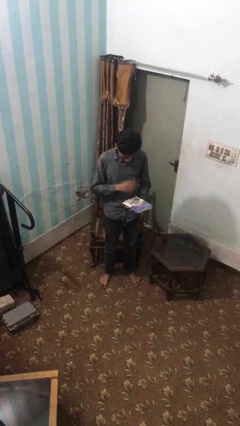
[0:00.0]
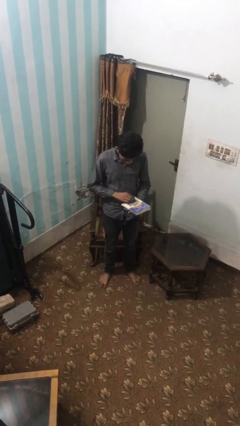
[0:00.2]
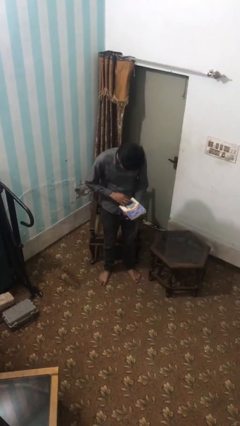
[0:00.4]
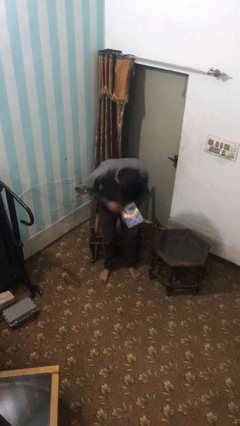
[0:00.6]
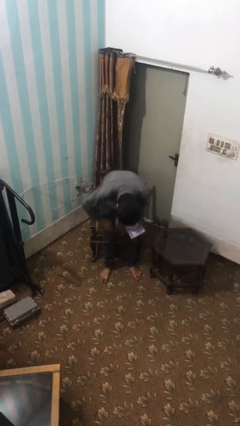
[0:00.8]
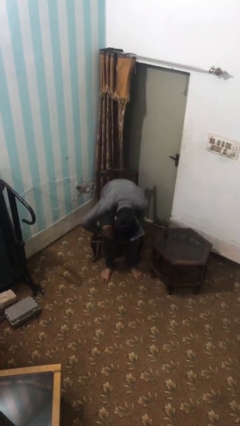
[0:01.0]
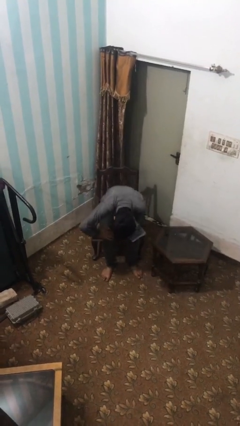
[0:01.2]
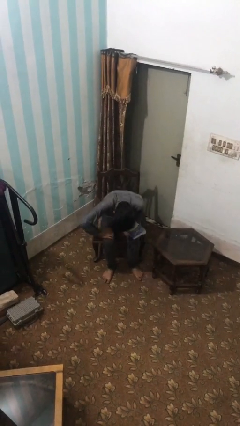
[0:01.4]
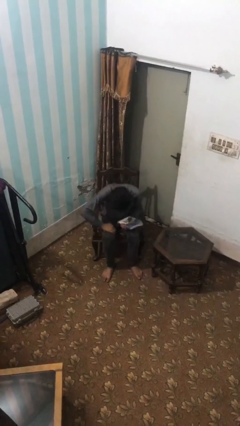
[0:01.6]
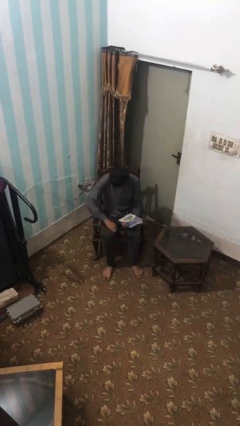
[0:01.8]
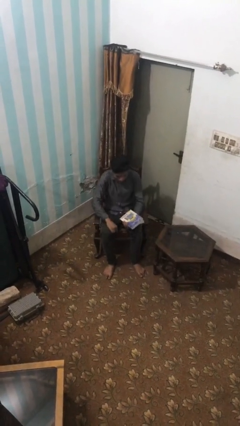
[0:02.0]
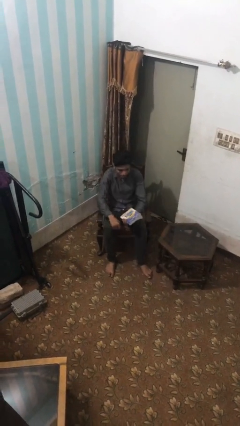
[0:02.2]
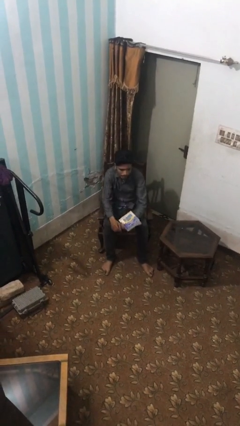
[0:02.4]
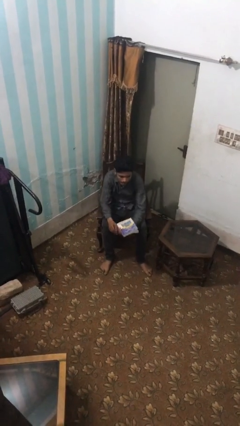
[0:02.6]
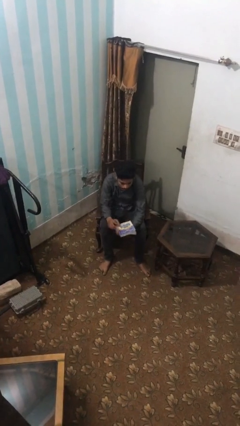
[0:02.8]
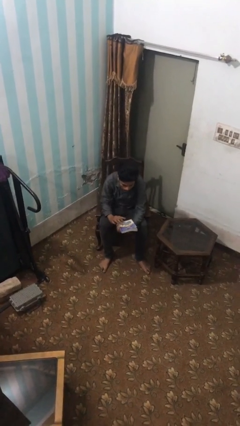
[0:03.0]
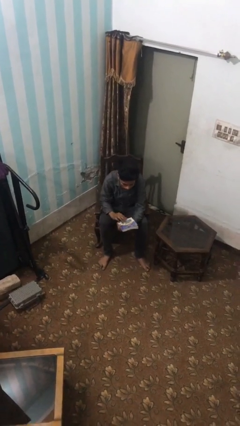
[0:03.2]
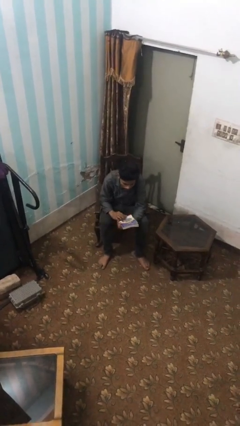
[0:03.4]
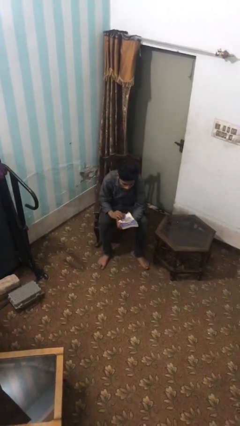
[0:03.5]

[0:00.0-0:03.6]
person sits down

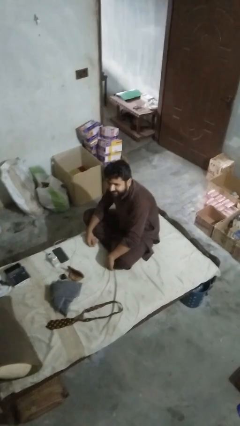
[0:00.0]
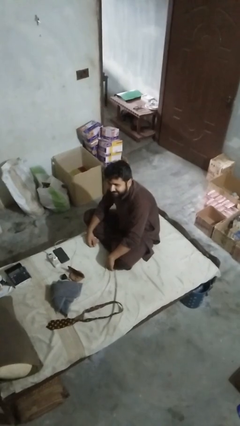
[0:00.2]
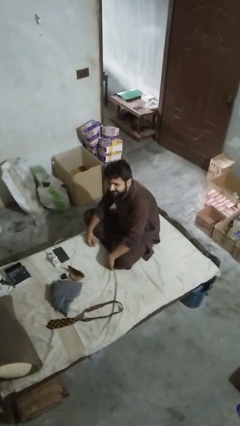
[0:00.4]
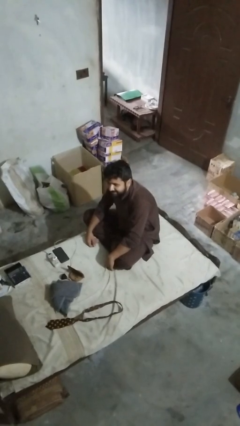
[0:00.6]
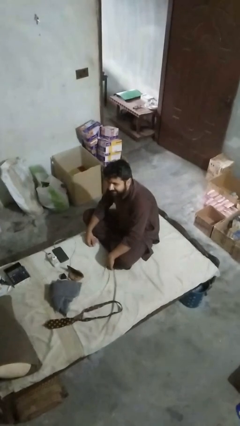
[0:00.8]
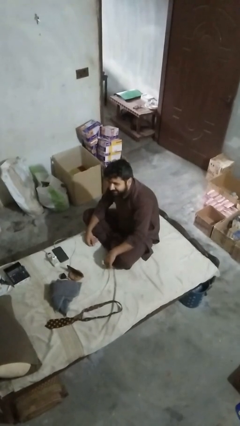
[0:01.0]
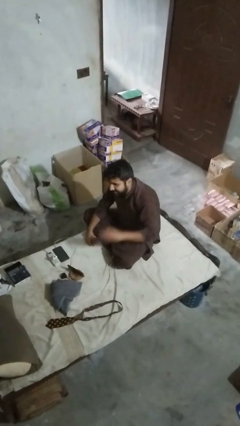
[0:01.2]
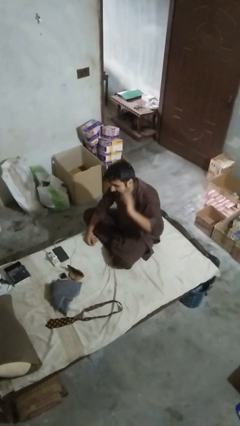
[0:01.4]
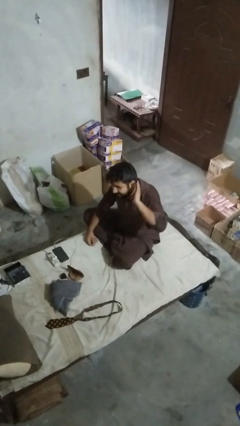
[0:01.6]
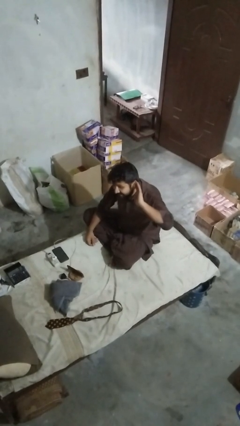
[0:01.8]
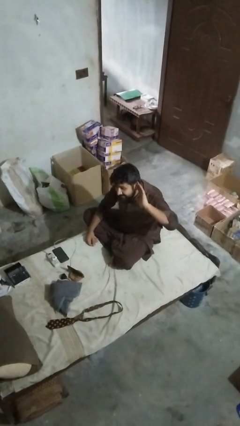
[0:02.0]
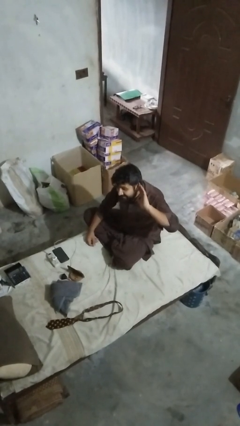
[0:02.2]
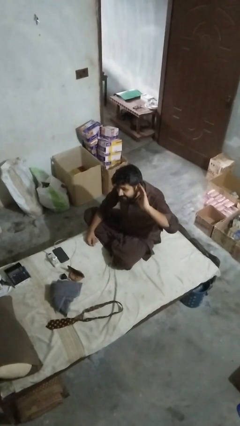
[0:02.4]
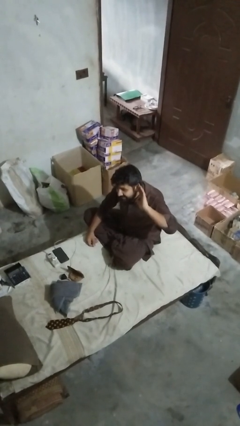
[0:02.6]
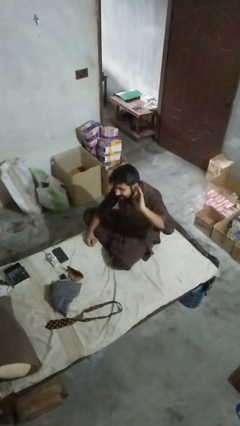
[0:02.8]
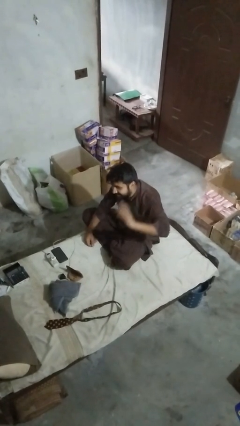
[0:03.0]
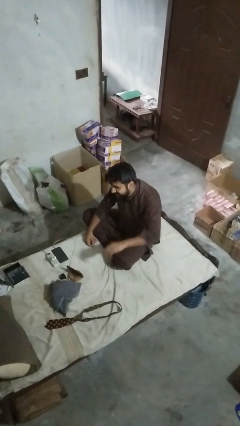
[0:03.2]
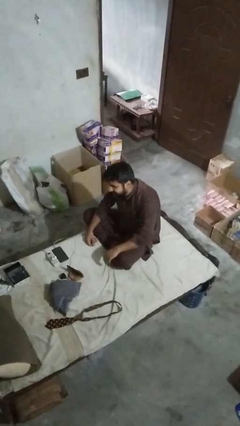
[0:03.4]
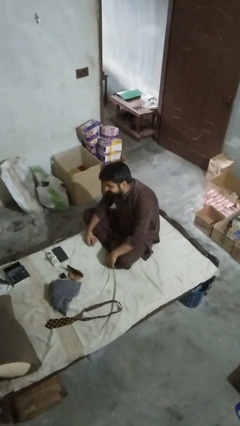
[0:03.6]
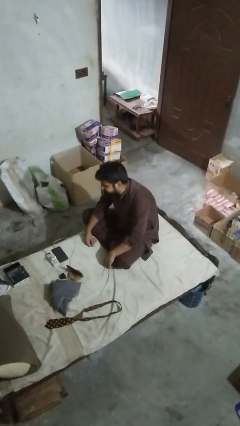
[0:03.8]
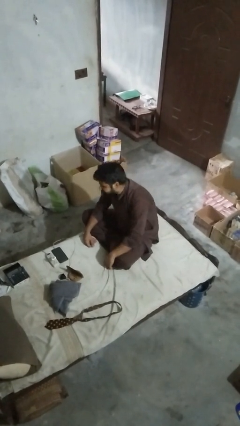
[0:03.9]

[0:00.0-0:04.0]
person gestures listen closely

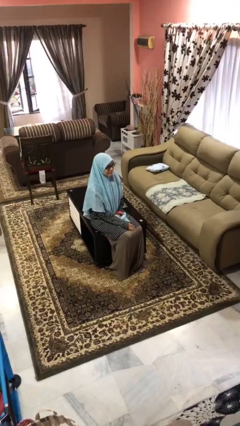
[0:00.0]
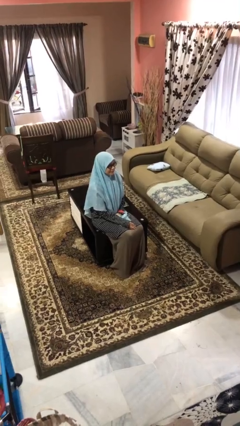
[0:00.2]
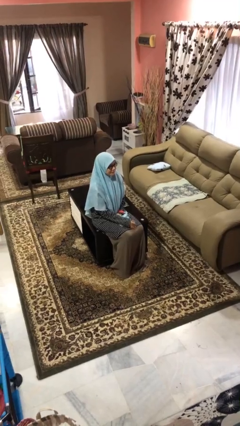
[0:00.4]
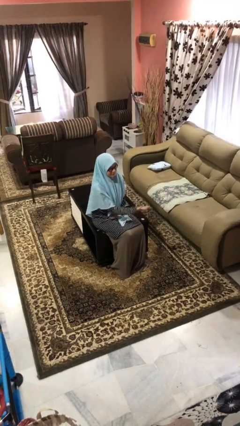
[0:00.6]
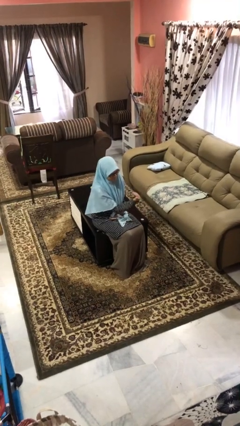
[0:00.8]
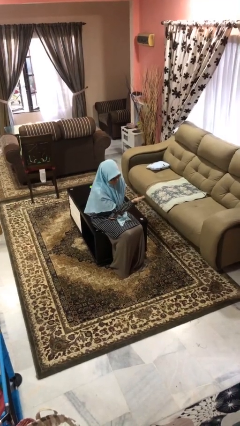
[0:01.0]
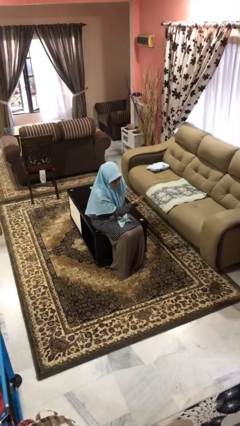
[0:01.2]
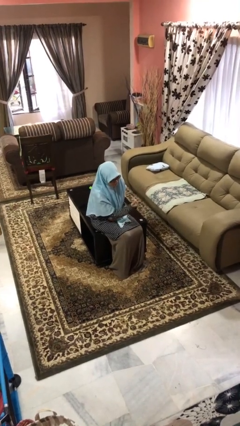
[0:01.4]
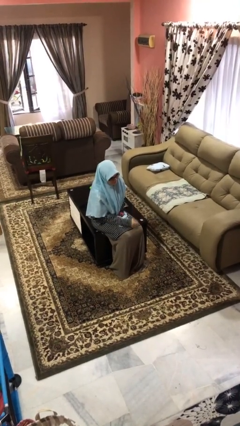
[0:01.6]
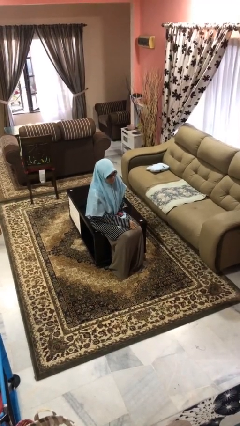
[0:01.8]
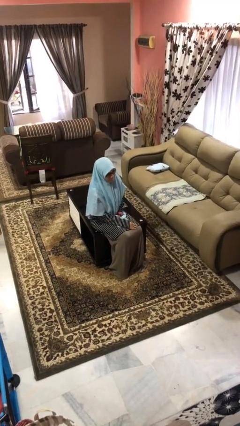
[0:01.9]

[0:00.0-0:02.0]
person gestures come here

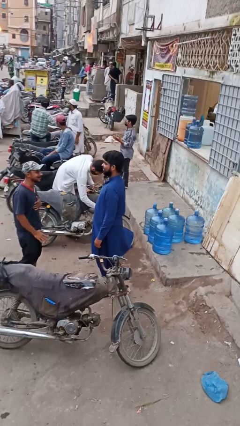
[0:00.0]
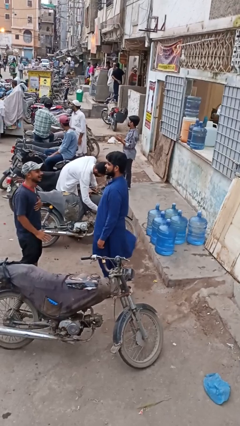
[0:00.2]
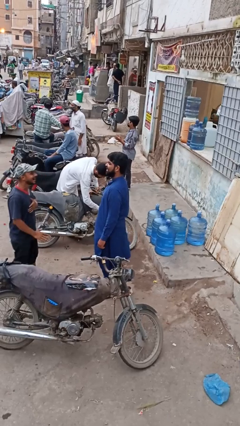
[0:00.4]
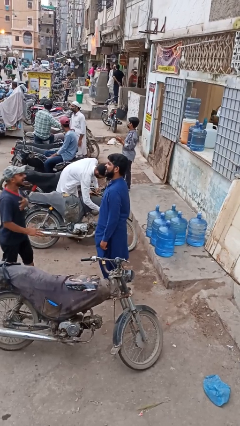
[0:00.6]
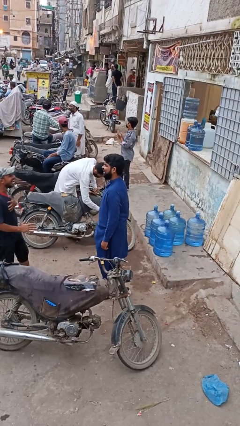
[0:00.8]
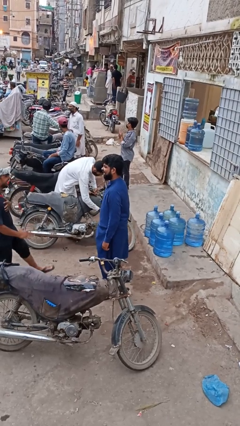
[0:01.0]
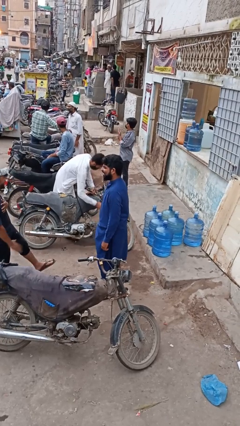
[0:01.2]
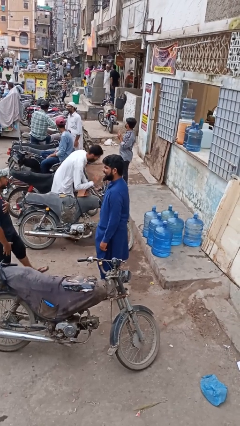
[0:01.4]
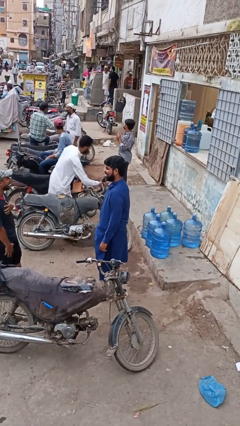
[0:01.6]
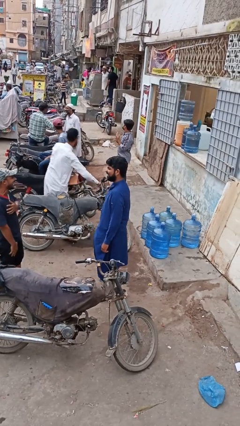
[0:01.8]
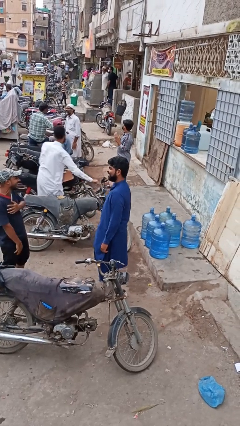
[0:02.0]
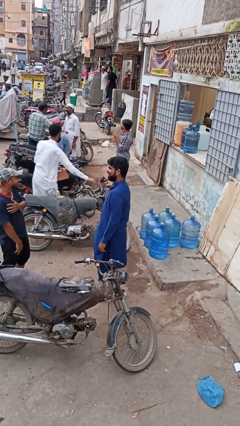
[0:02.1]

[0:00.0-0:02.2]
person laughs with person

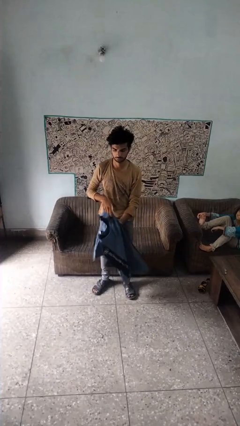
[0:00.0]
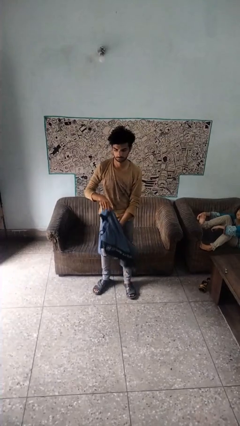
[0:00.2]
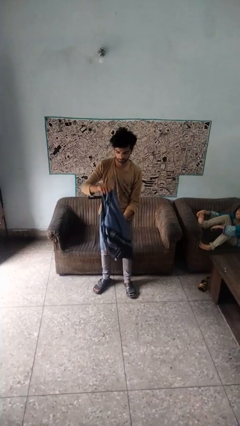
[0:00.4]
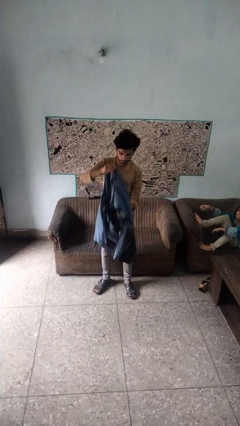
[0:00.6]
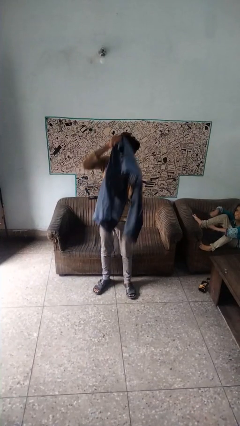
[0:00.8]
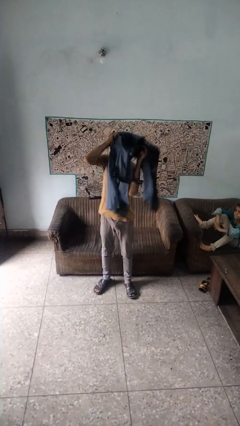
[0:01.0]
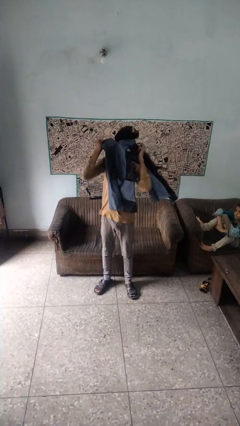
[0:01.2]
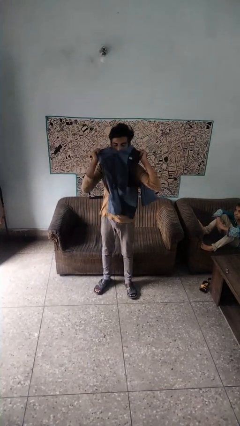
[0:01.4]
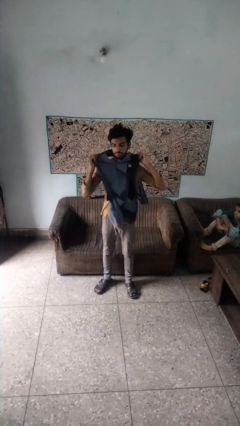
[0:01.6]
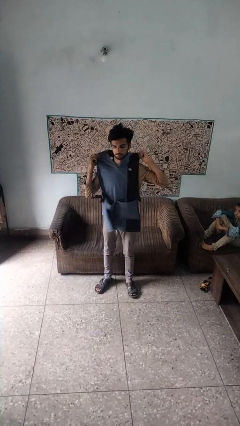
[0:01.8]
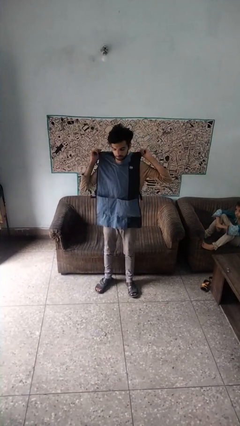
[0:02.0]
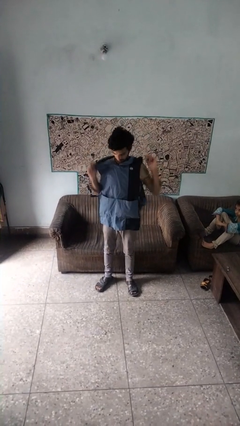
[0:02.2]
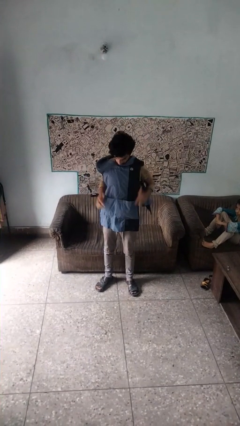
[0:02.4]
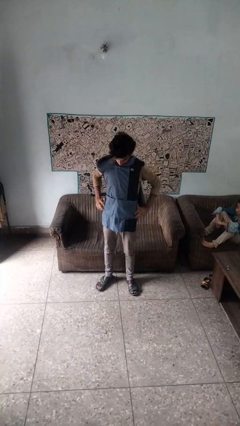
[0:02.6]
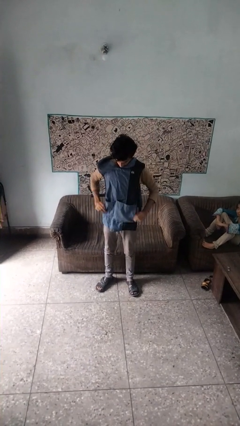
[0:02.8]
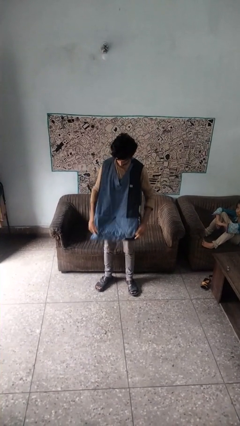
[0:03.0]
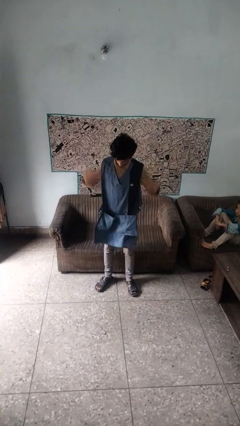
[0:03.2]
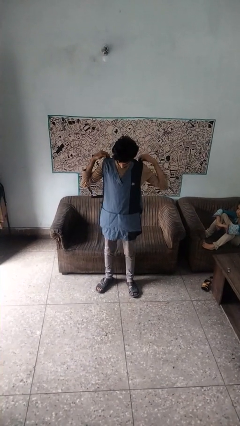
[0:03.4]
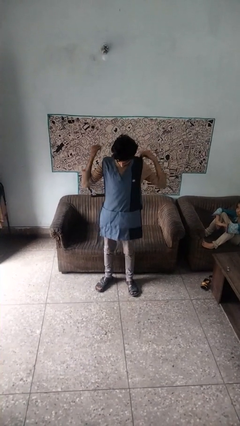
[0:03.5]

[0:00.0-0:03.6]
person puts on apron

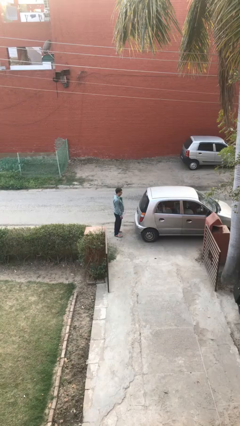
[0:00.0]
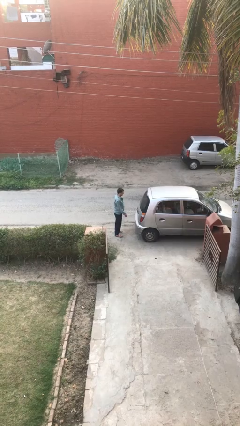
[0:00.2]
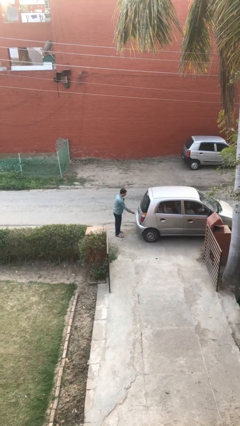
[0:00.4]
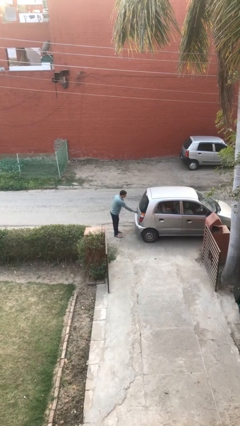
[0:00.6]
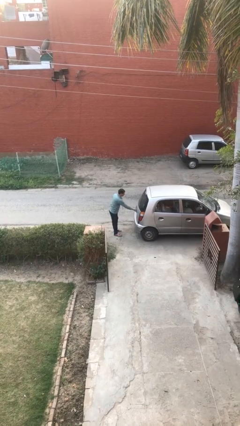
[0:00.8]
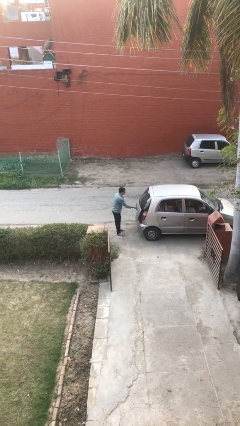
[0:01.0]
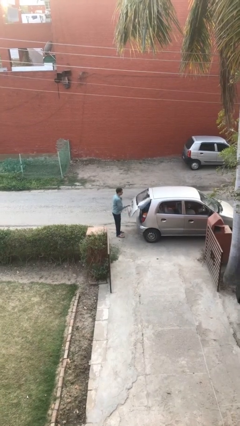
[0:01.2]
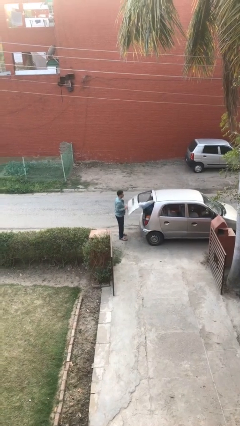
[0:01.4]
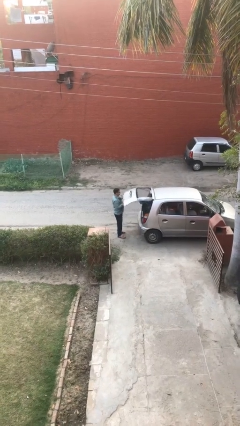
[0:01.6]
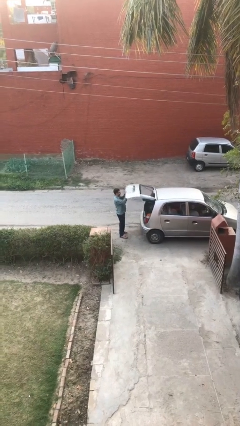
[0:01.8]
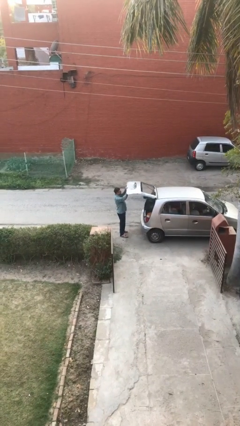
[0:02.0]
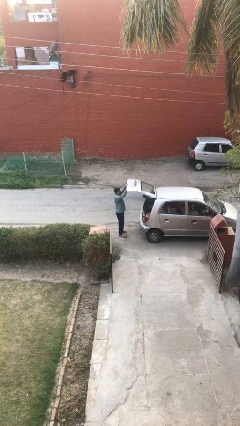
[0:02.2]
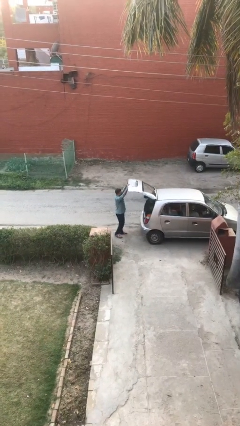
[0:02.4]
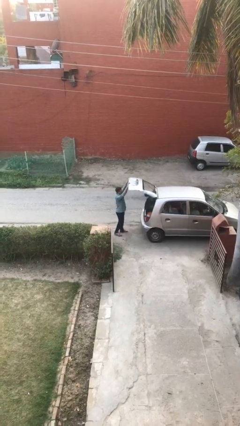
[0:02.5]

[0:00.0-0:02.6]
person opens car trunk
